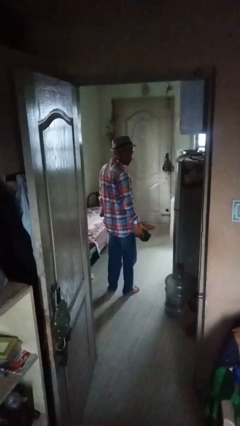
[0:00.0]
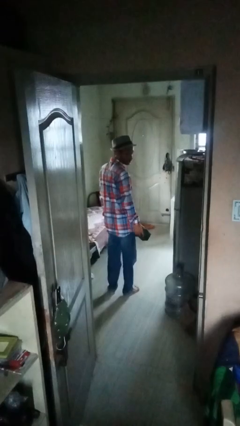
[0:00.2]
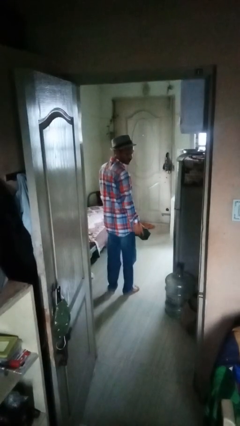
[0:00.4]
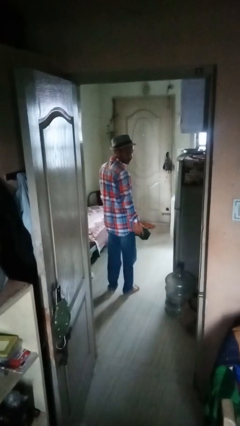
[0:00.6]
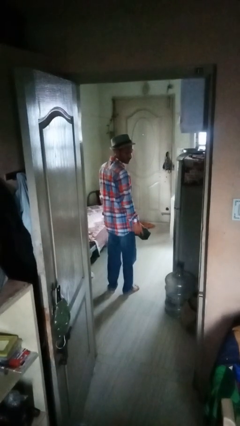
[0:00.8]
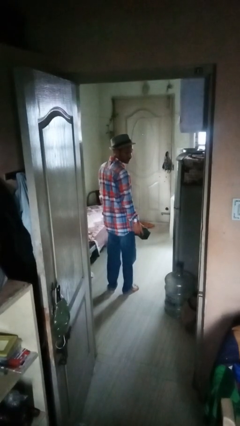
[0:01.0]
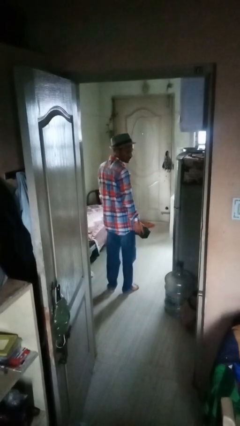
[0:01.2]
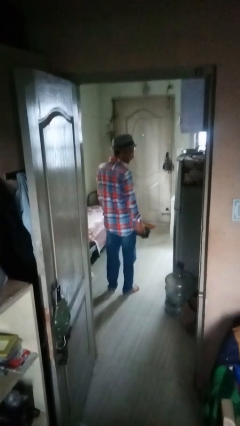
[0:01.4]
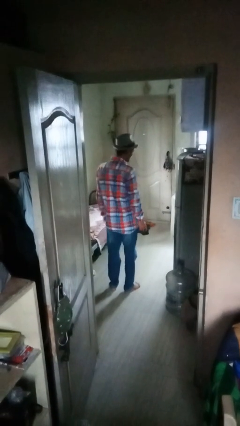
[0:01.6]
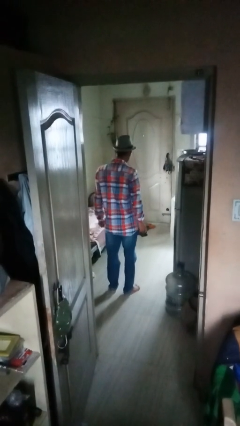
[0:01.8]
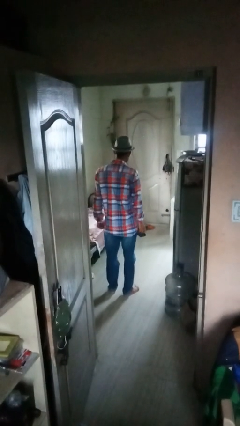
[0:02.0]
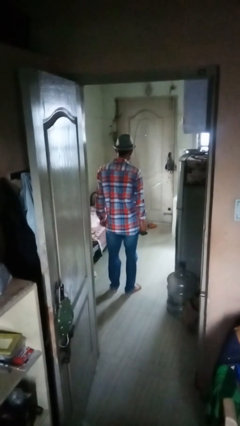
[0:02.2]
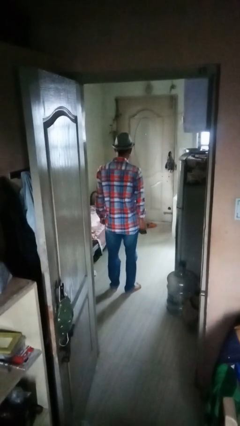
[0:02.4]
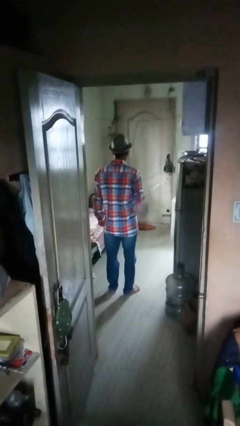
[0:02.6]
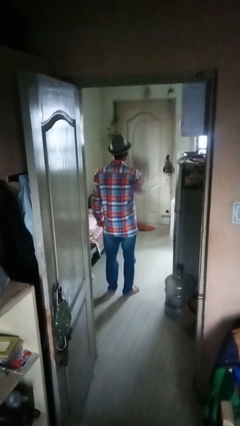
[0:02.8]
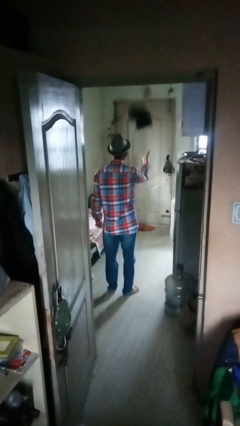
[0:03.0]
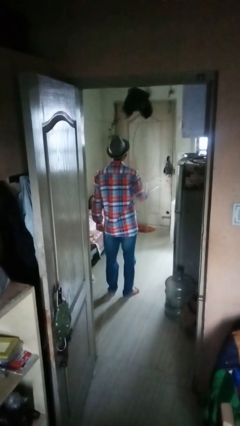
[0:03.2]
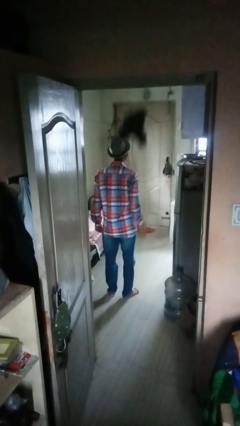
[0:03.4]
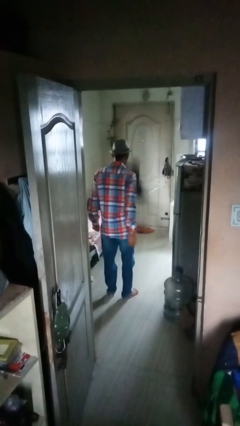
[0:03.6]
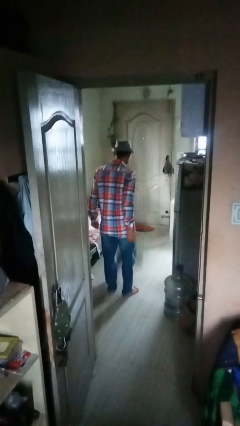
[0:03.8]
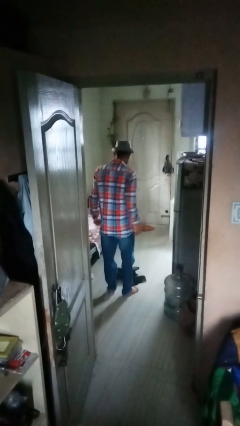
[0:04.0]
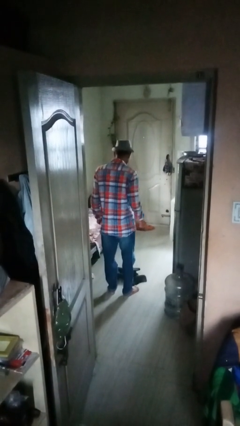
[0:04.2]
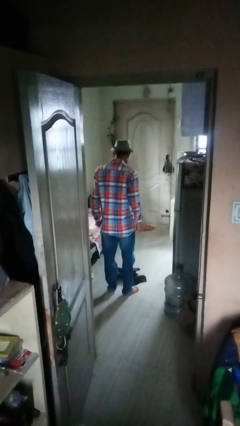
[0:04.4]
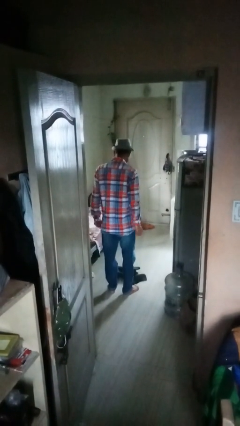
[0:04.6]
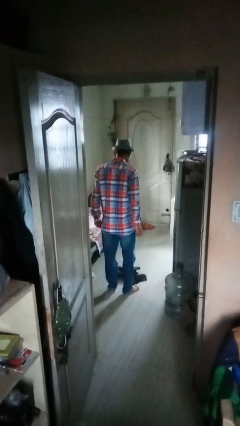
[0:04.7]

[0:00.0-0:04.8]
person throws object into air

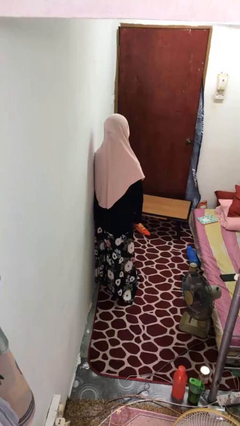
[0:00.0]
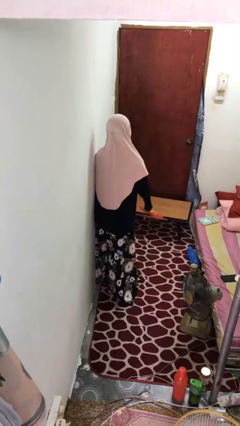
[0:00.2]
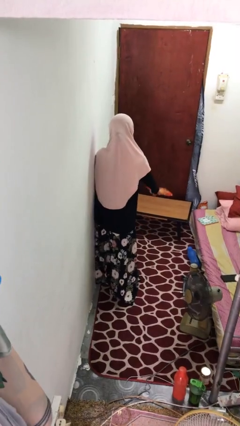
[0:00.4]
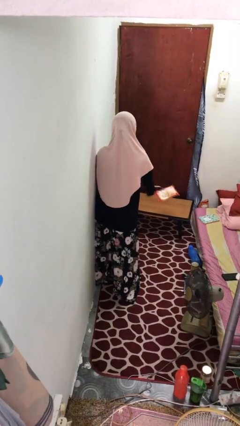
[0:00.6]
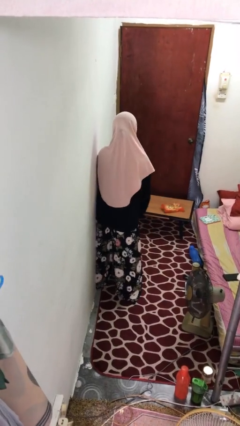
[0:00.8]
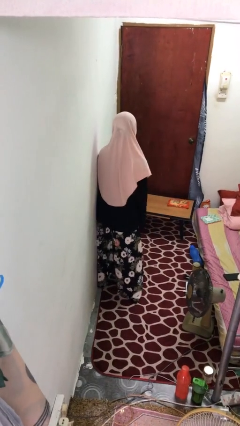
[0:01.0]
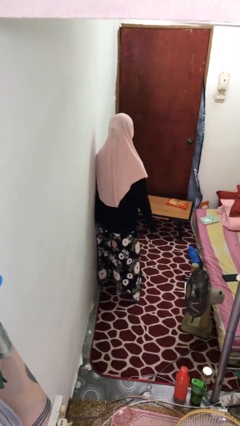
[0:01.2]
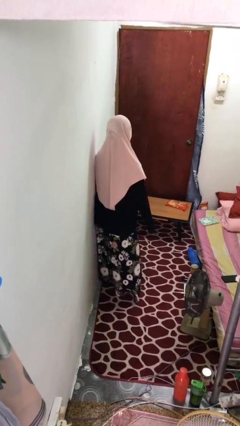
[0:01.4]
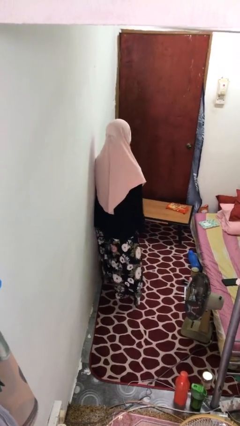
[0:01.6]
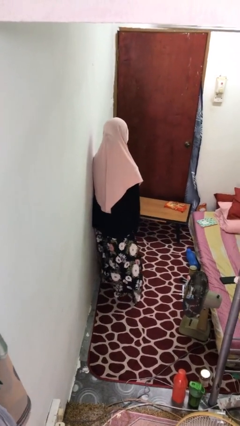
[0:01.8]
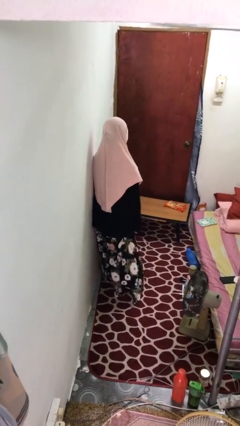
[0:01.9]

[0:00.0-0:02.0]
person throws object on table

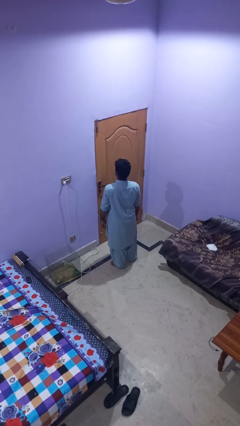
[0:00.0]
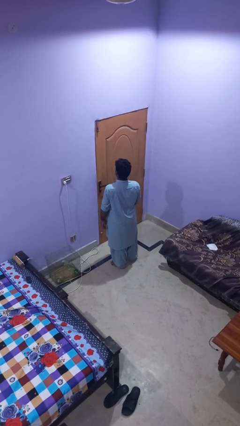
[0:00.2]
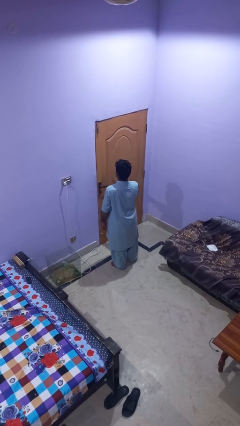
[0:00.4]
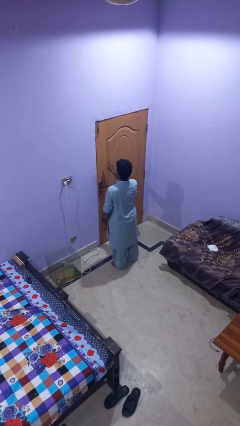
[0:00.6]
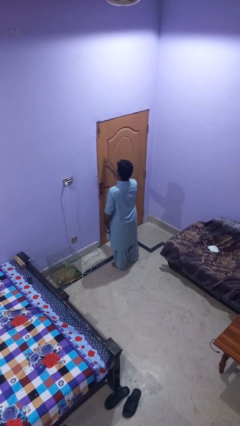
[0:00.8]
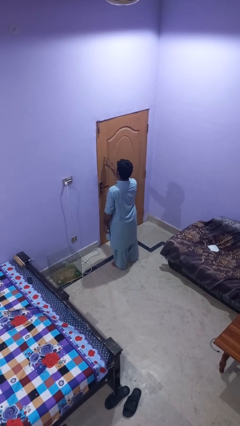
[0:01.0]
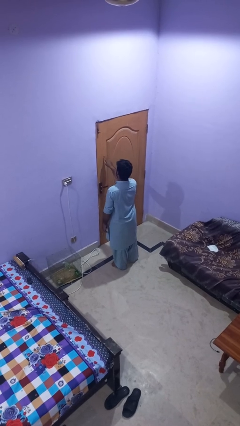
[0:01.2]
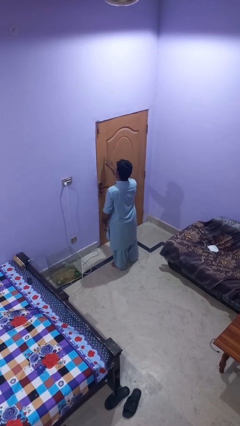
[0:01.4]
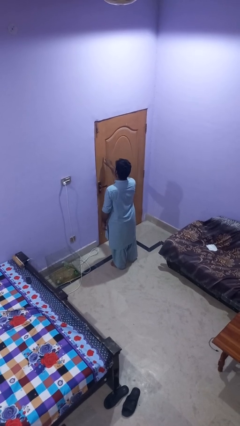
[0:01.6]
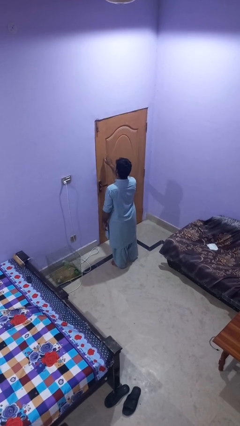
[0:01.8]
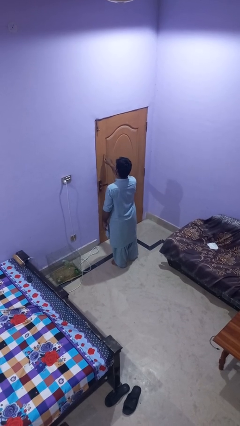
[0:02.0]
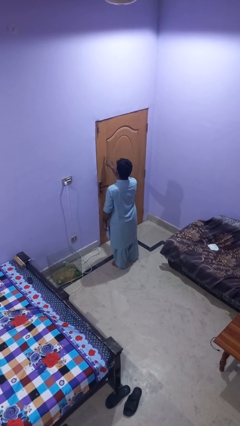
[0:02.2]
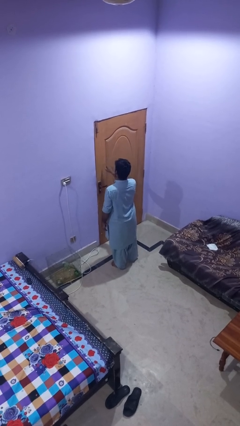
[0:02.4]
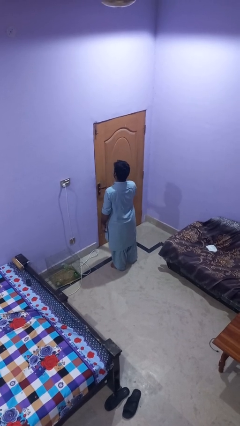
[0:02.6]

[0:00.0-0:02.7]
person taps object with finger

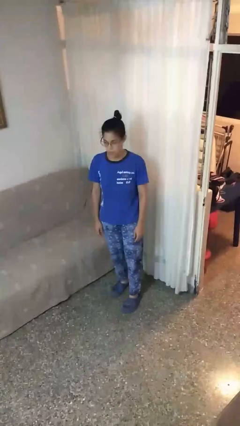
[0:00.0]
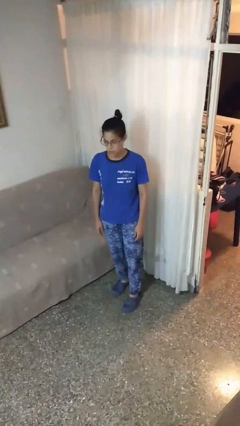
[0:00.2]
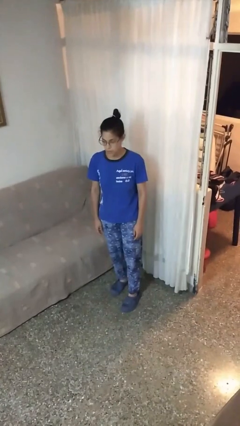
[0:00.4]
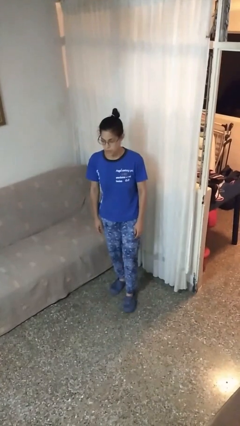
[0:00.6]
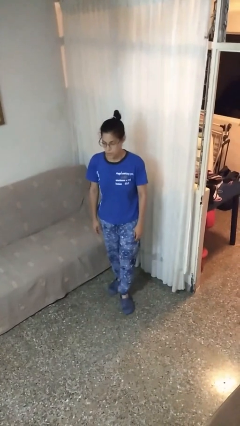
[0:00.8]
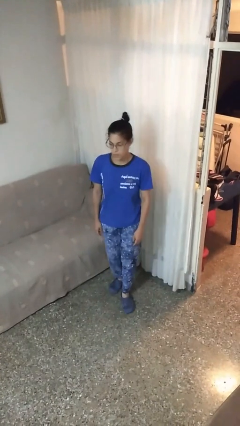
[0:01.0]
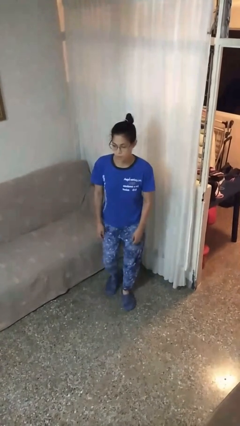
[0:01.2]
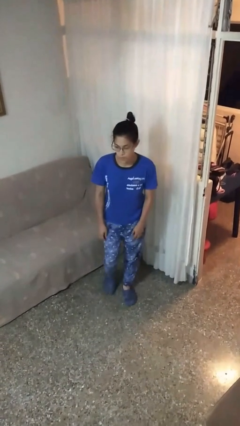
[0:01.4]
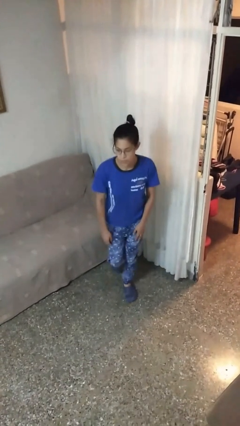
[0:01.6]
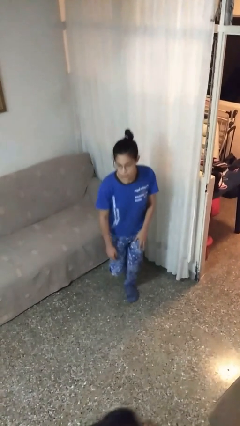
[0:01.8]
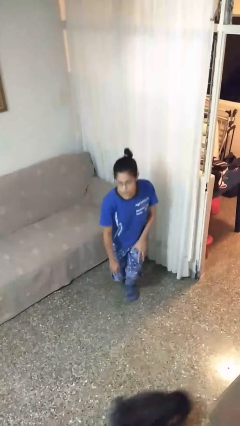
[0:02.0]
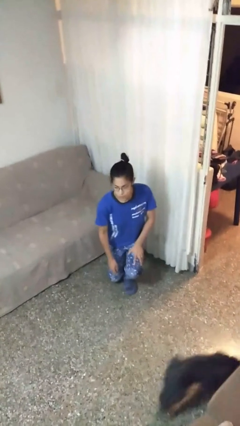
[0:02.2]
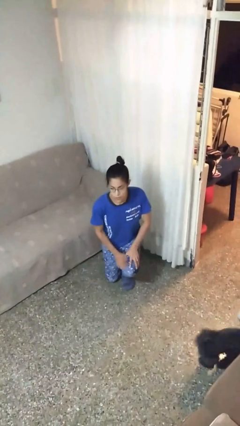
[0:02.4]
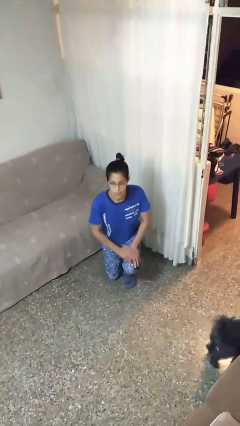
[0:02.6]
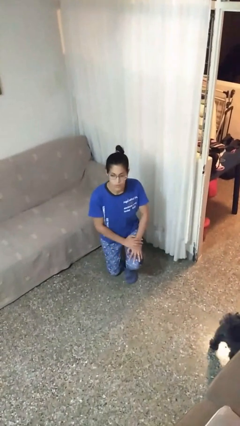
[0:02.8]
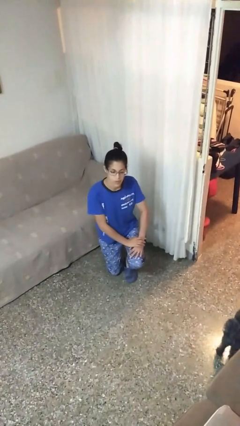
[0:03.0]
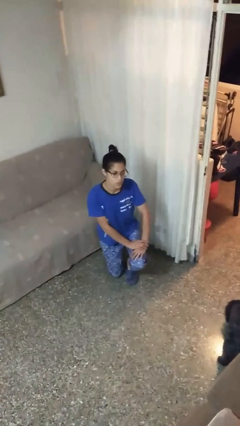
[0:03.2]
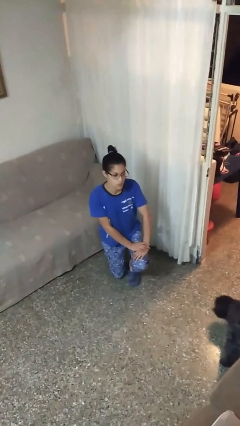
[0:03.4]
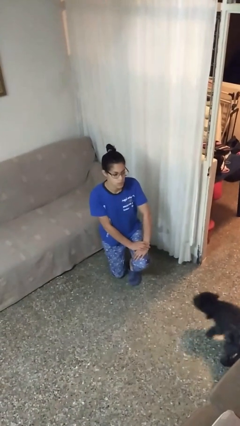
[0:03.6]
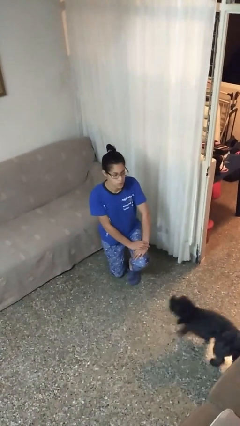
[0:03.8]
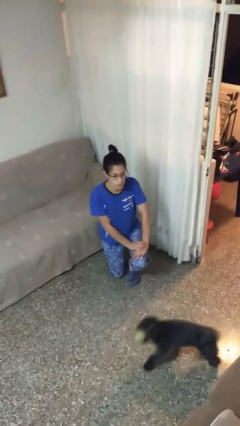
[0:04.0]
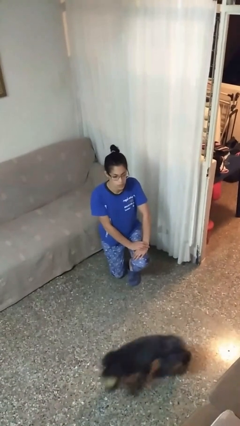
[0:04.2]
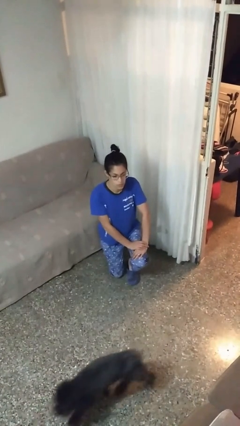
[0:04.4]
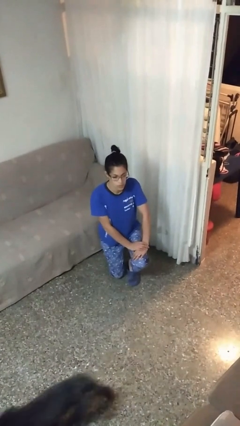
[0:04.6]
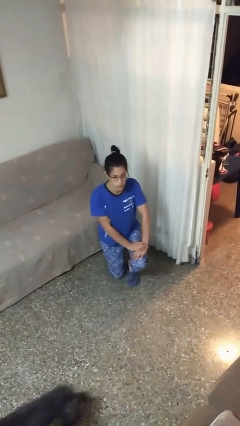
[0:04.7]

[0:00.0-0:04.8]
person kneels

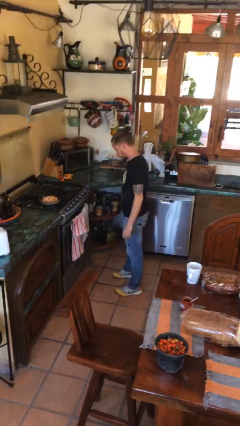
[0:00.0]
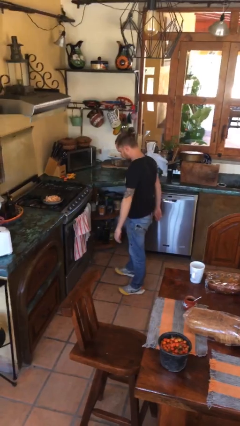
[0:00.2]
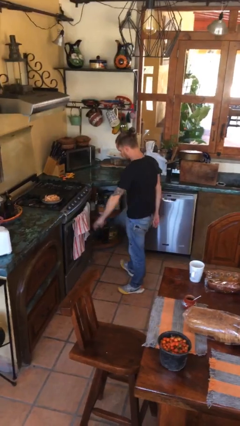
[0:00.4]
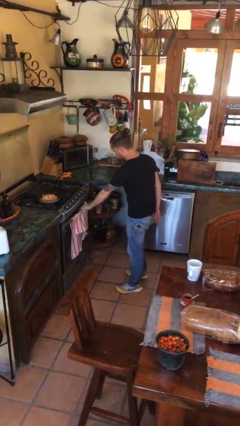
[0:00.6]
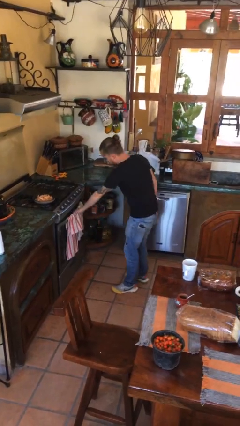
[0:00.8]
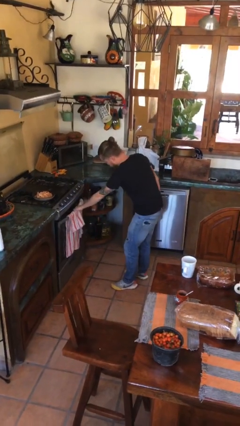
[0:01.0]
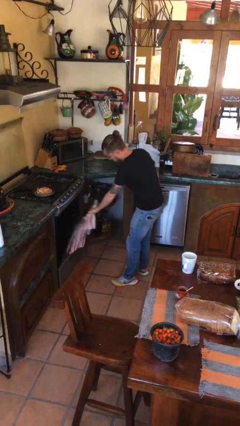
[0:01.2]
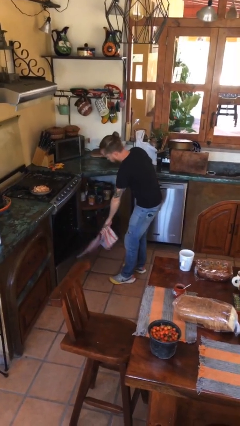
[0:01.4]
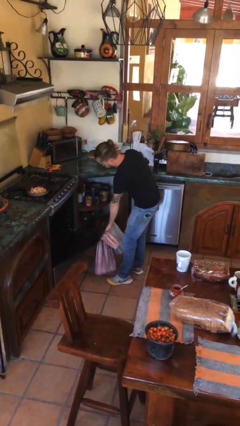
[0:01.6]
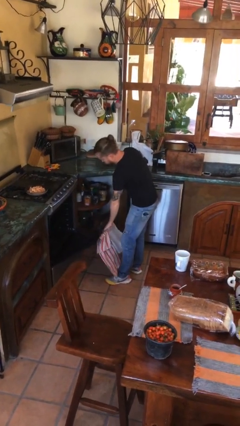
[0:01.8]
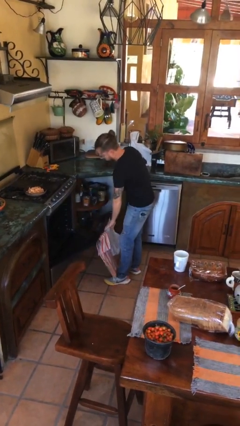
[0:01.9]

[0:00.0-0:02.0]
person opens oven door

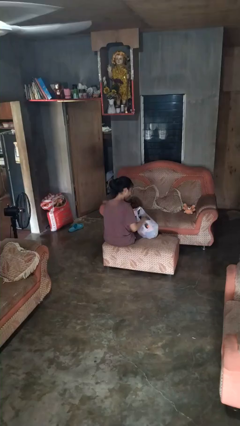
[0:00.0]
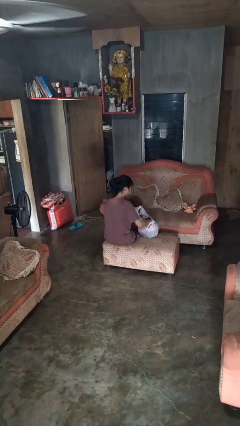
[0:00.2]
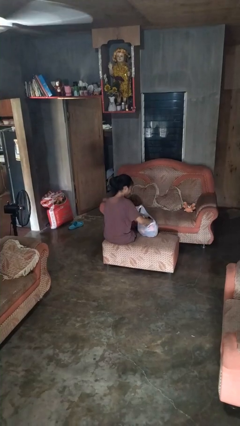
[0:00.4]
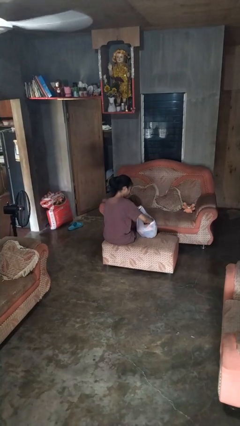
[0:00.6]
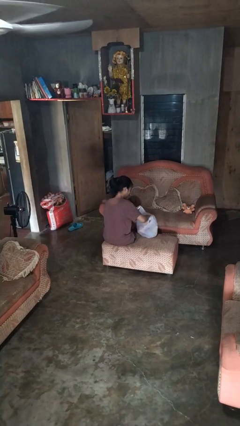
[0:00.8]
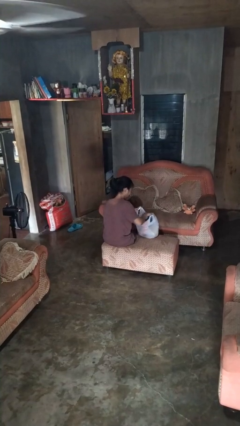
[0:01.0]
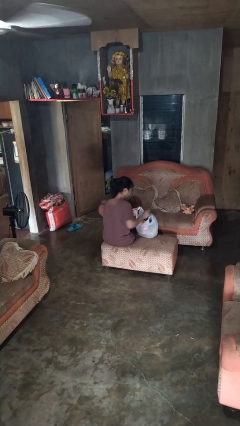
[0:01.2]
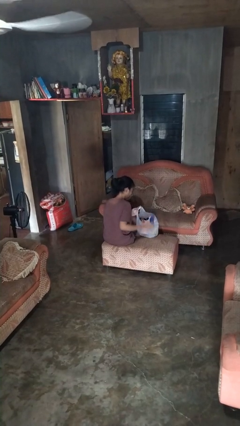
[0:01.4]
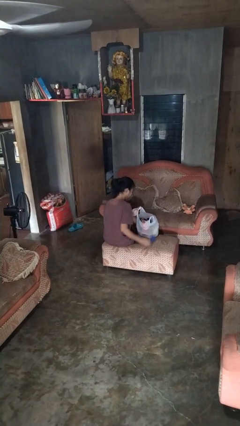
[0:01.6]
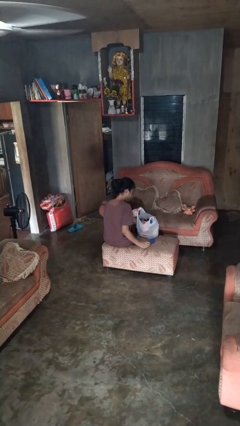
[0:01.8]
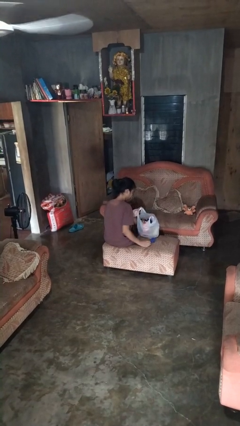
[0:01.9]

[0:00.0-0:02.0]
person takes object from bag
